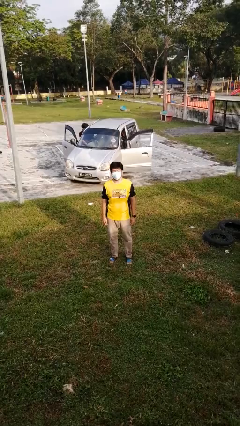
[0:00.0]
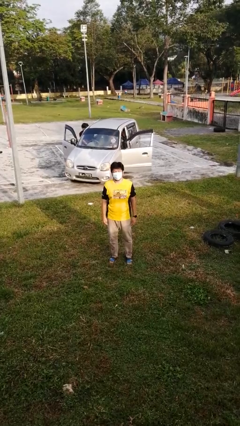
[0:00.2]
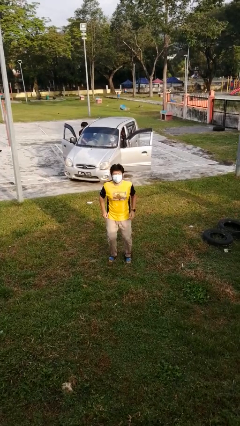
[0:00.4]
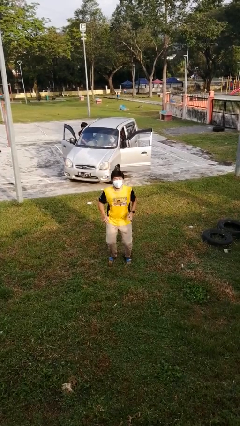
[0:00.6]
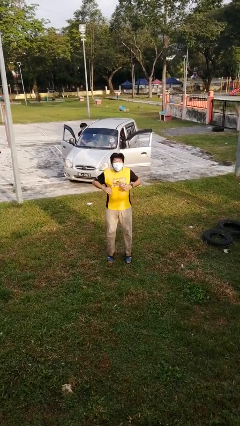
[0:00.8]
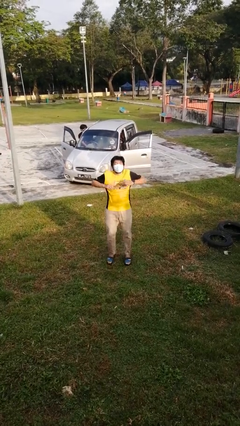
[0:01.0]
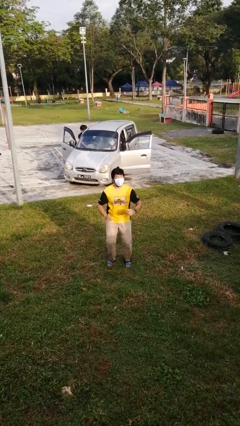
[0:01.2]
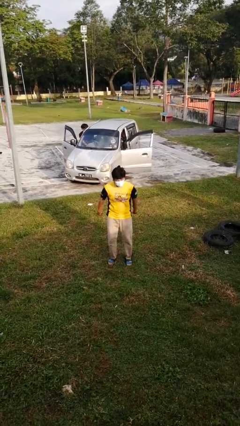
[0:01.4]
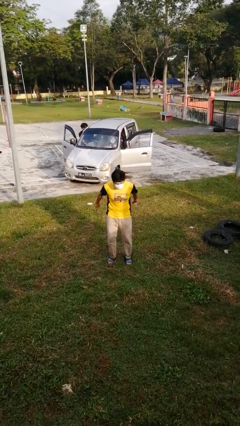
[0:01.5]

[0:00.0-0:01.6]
person jumps

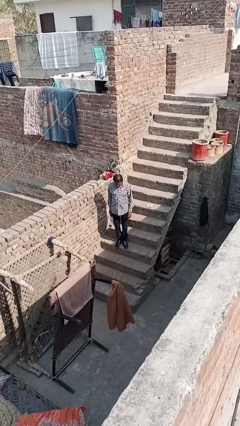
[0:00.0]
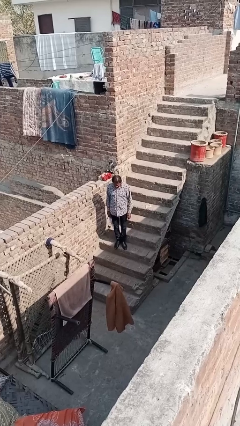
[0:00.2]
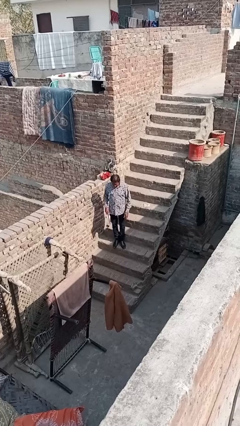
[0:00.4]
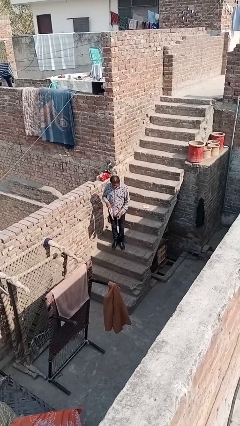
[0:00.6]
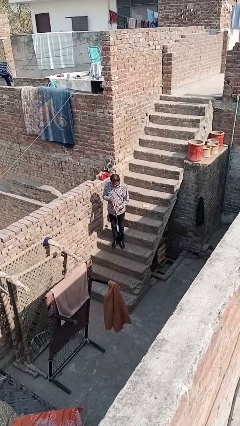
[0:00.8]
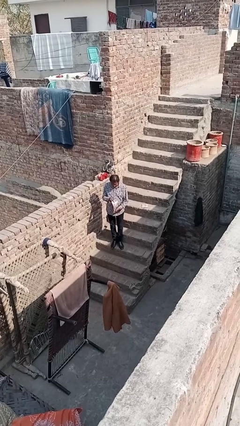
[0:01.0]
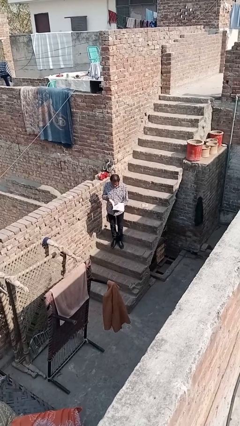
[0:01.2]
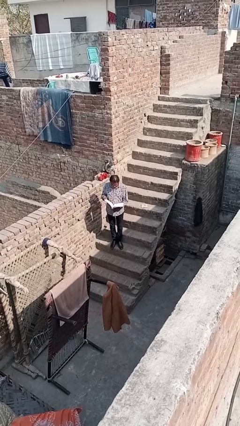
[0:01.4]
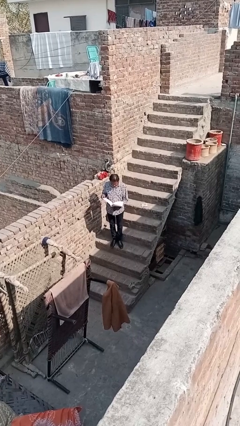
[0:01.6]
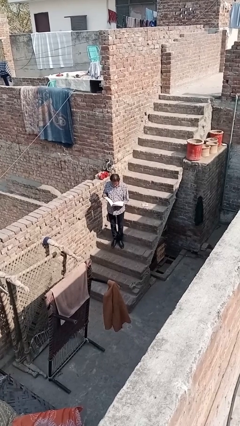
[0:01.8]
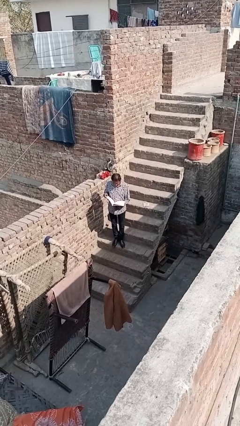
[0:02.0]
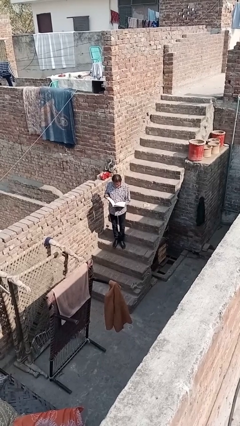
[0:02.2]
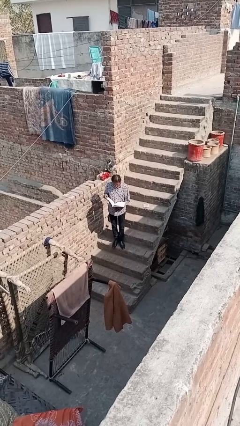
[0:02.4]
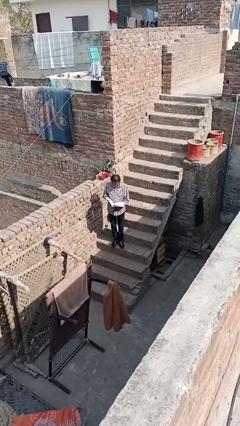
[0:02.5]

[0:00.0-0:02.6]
person reads document

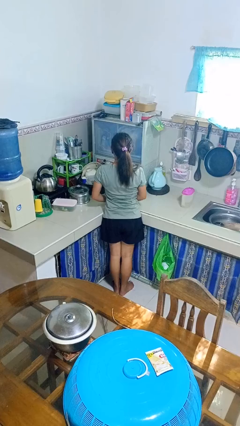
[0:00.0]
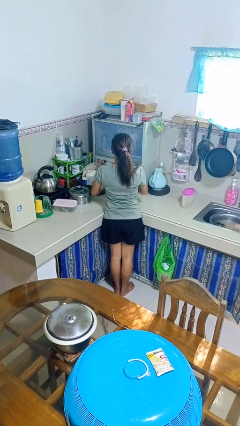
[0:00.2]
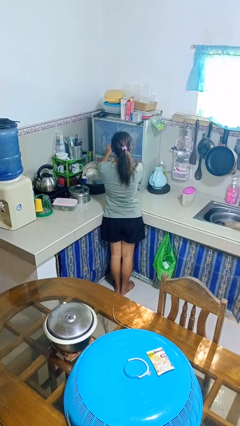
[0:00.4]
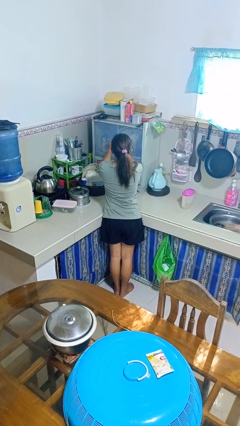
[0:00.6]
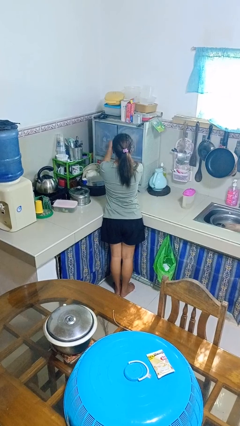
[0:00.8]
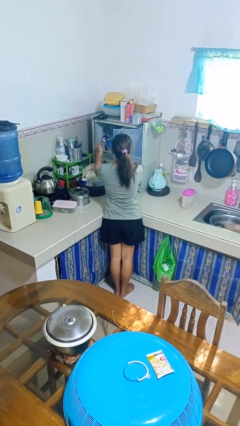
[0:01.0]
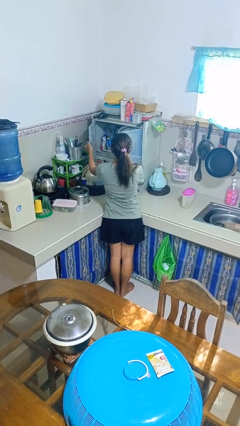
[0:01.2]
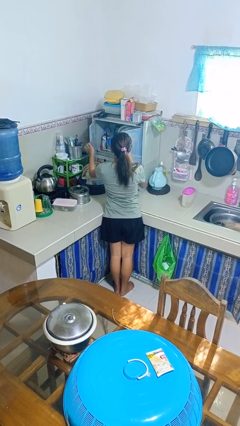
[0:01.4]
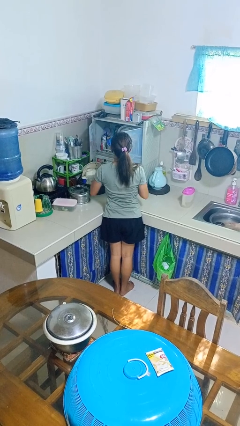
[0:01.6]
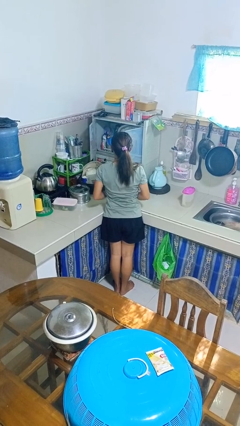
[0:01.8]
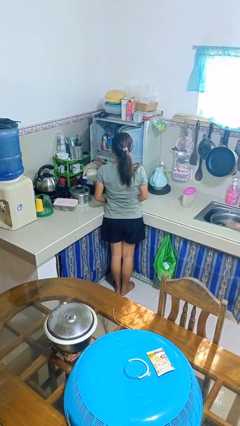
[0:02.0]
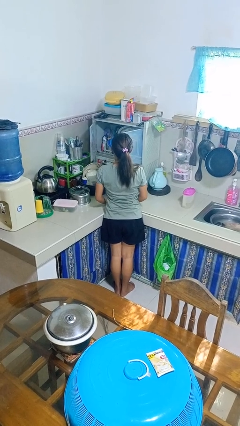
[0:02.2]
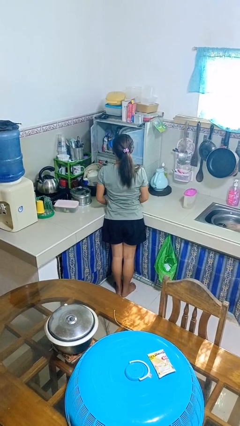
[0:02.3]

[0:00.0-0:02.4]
person opens kitchen drawer

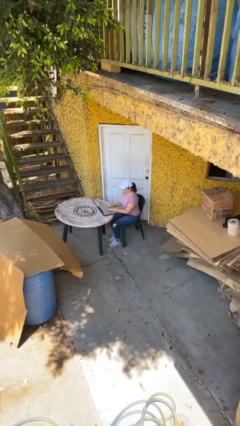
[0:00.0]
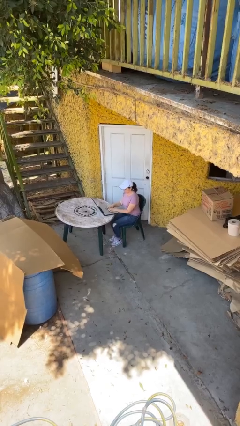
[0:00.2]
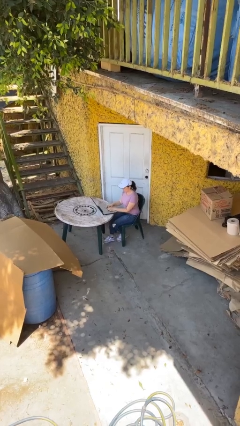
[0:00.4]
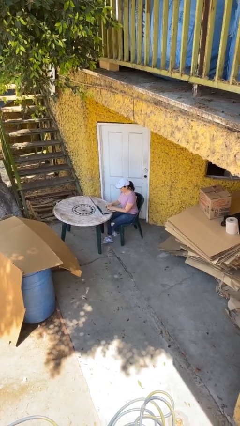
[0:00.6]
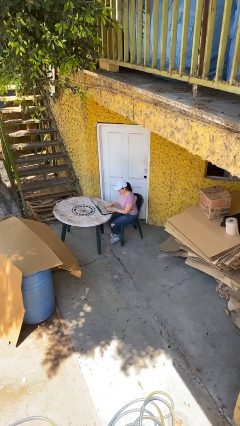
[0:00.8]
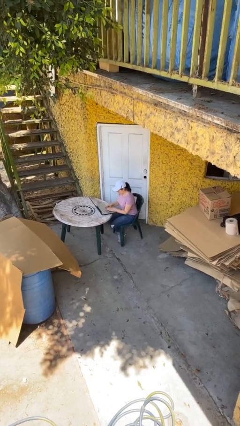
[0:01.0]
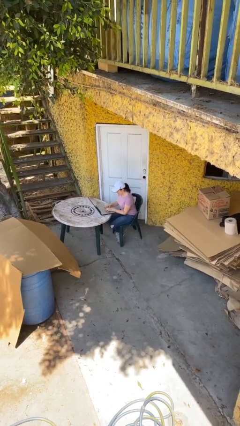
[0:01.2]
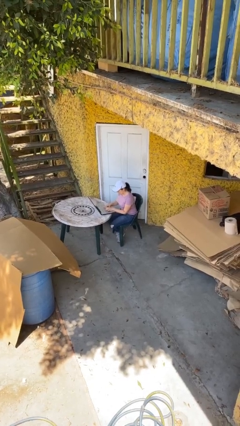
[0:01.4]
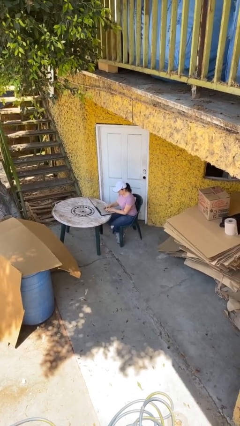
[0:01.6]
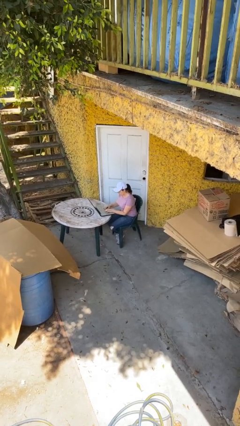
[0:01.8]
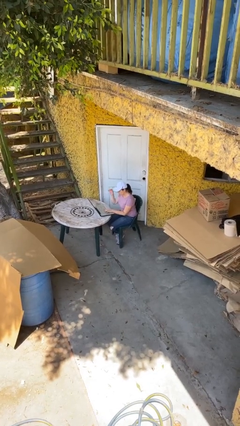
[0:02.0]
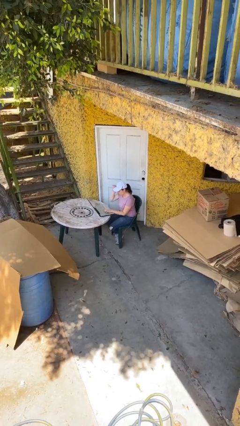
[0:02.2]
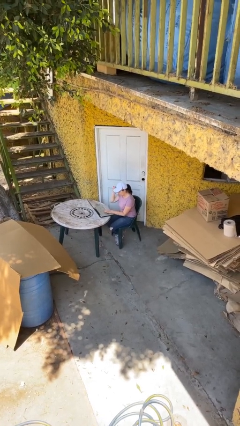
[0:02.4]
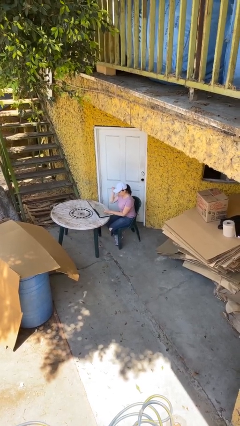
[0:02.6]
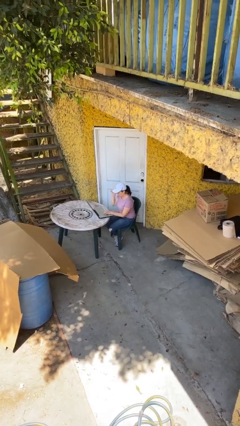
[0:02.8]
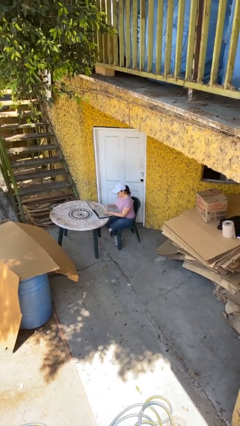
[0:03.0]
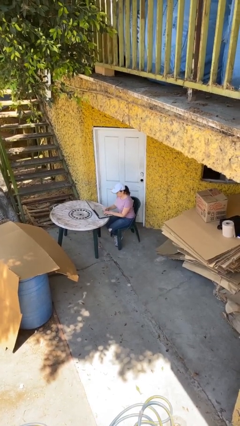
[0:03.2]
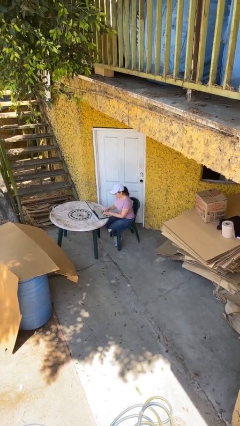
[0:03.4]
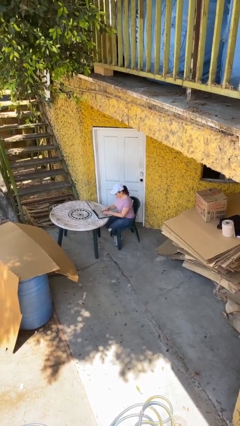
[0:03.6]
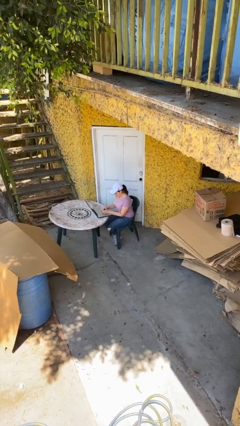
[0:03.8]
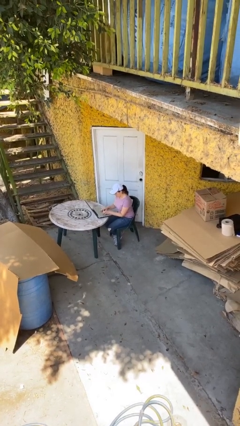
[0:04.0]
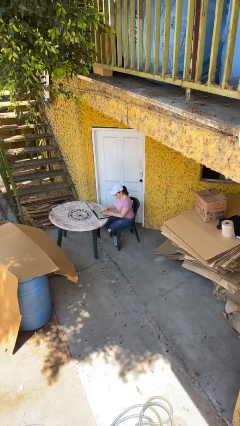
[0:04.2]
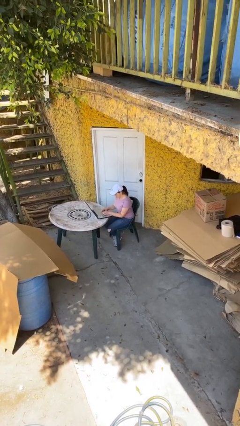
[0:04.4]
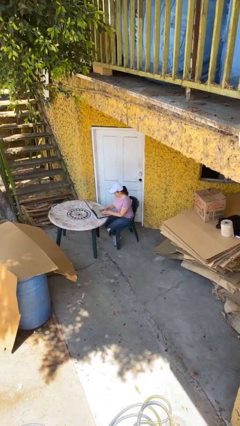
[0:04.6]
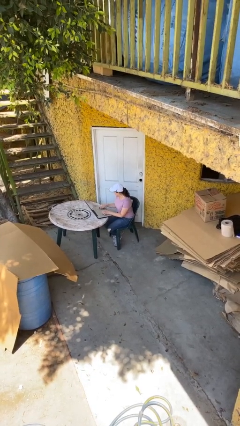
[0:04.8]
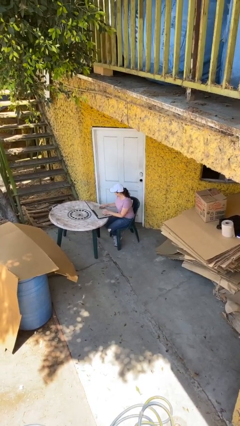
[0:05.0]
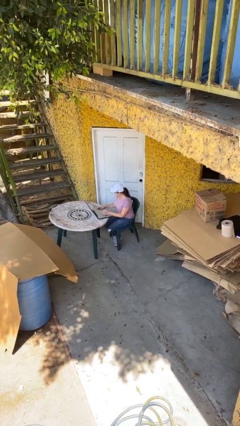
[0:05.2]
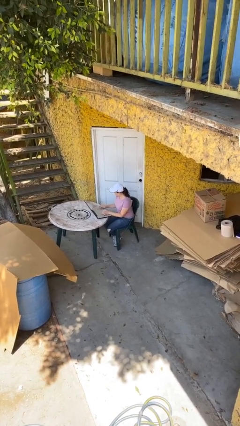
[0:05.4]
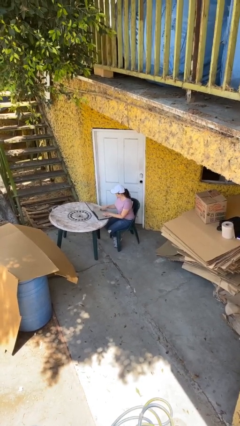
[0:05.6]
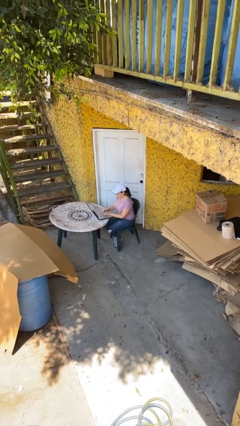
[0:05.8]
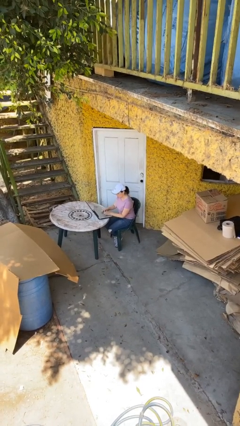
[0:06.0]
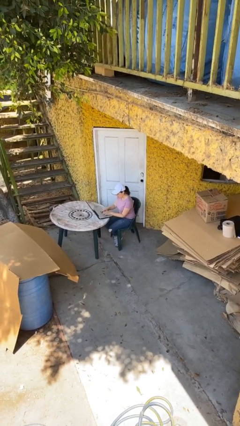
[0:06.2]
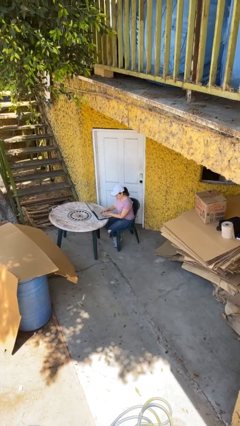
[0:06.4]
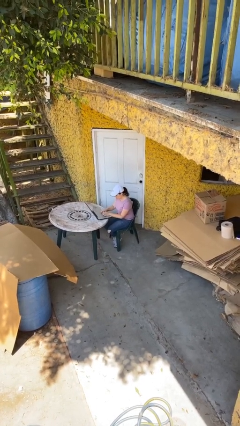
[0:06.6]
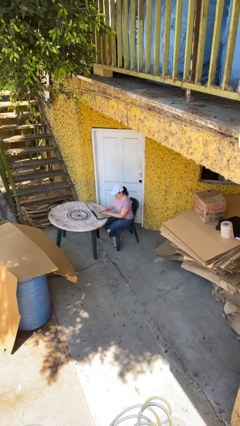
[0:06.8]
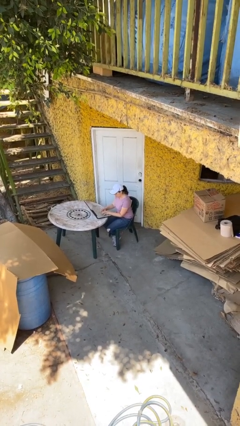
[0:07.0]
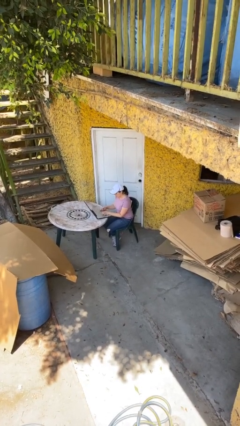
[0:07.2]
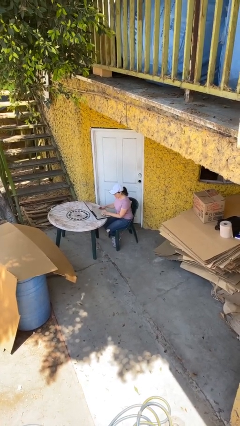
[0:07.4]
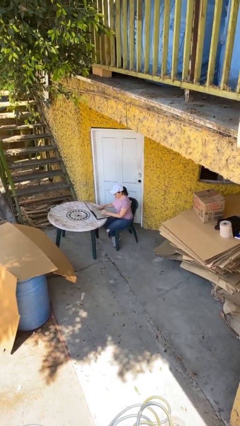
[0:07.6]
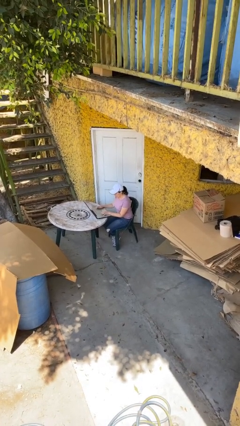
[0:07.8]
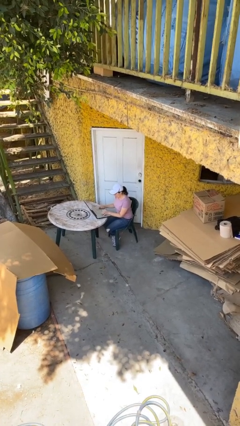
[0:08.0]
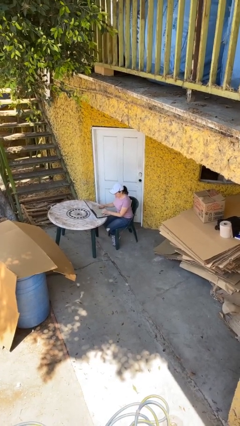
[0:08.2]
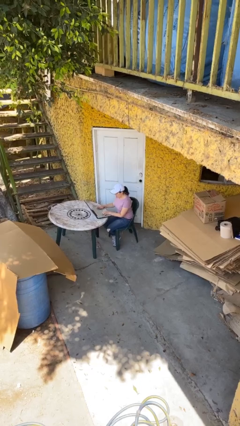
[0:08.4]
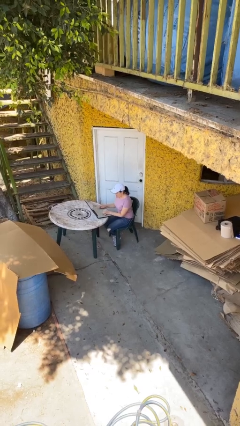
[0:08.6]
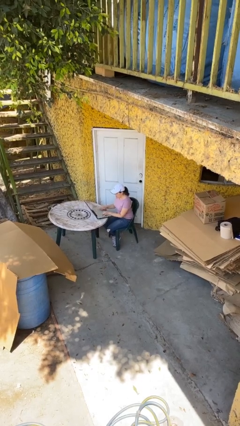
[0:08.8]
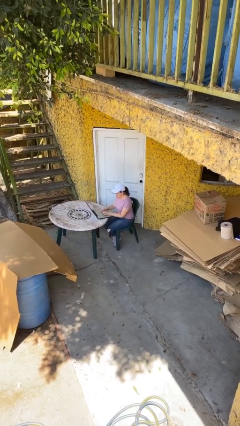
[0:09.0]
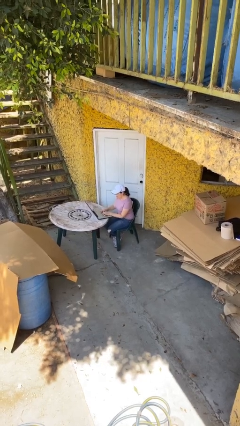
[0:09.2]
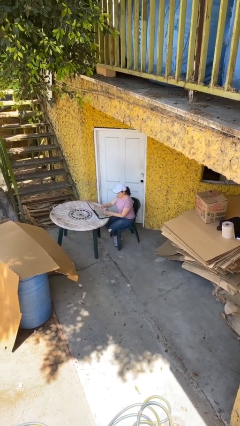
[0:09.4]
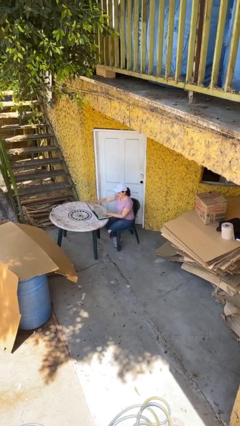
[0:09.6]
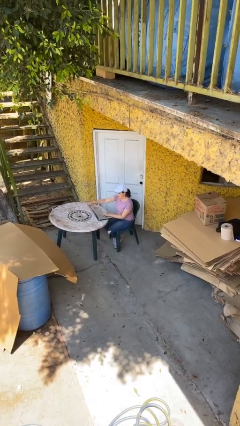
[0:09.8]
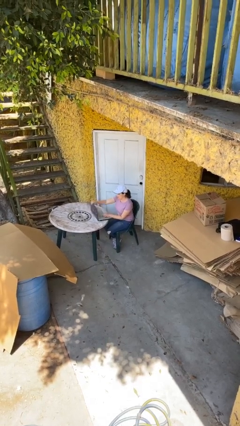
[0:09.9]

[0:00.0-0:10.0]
person interacts with laptop

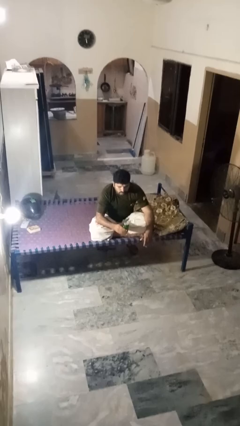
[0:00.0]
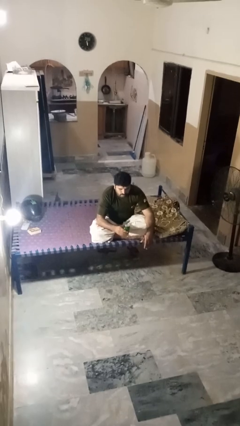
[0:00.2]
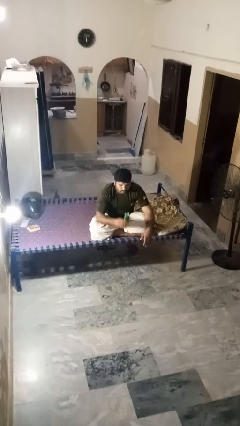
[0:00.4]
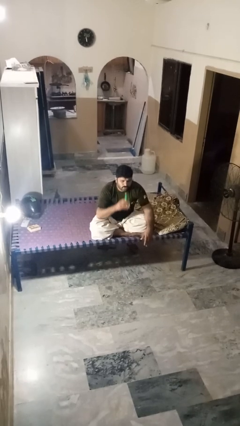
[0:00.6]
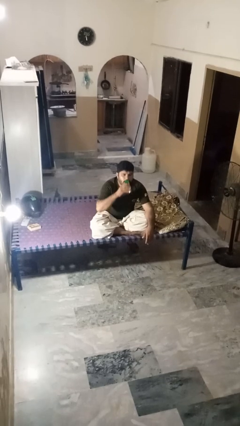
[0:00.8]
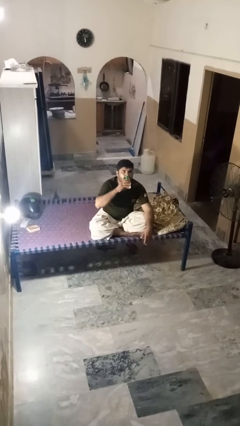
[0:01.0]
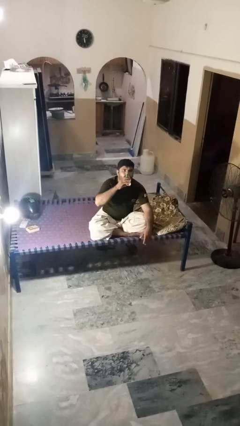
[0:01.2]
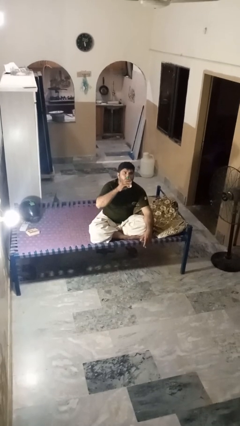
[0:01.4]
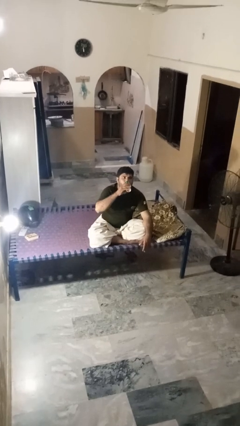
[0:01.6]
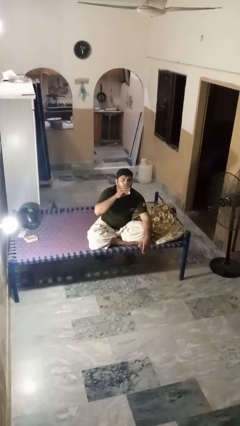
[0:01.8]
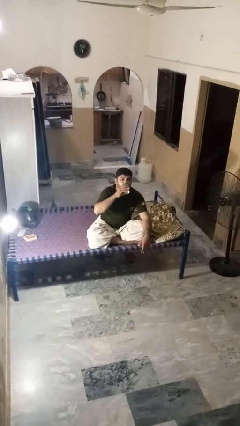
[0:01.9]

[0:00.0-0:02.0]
person drinks from beverage can
